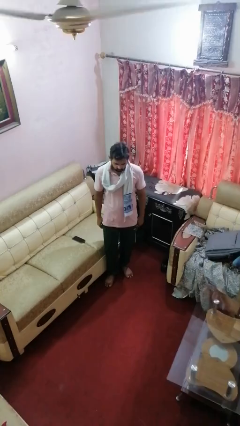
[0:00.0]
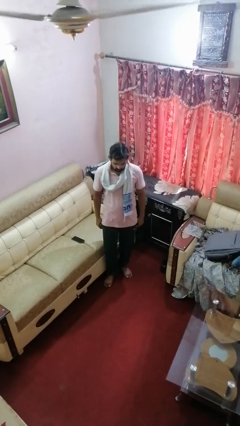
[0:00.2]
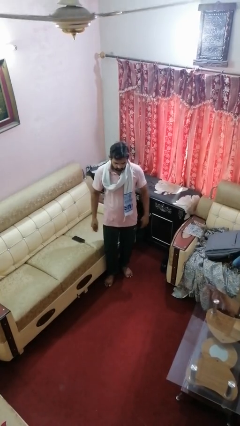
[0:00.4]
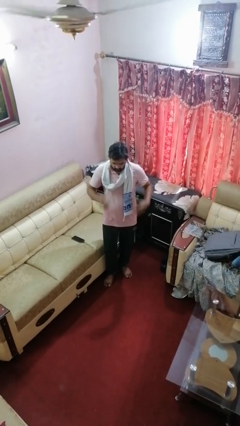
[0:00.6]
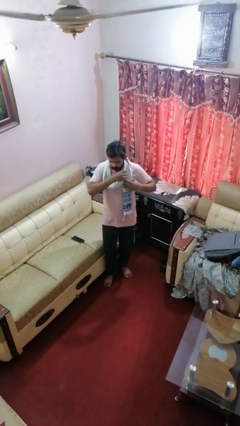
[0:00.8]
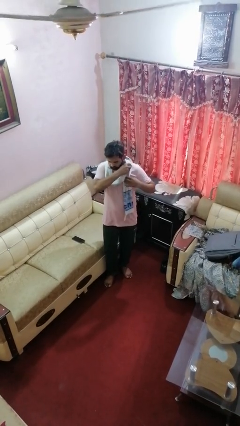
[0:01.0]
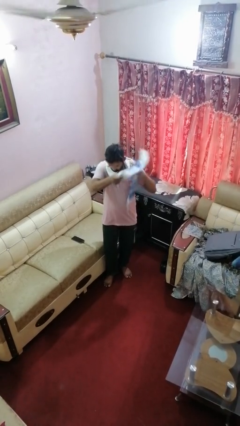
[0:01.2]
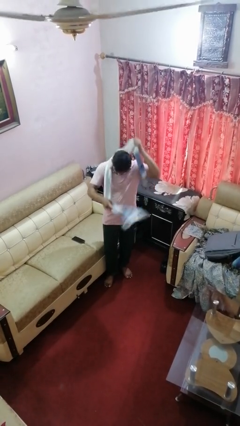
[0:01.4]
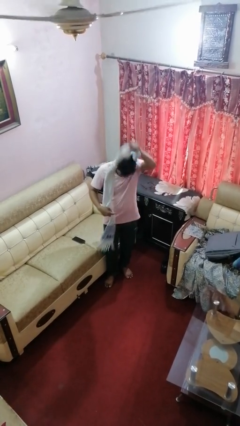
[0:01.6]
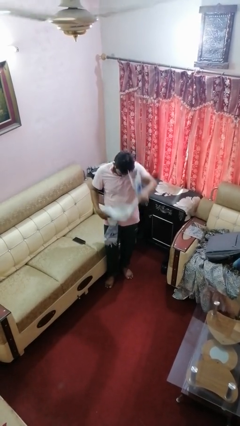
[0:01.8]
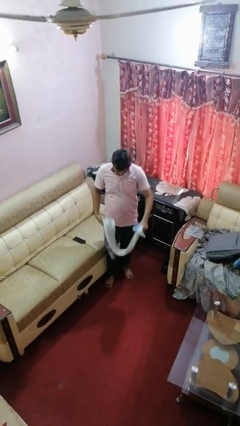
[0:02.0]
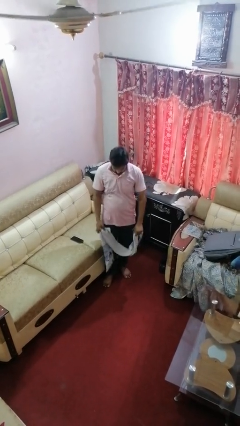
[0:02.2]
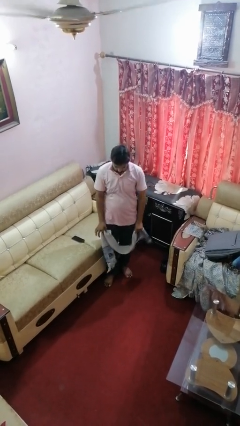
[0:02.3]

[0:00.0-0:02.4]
person takes off scarf

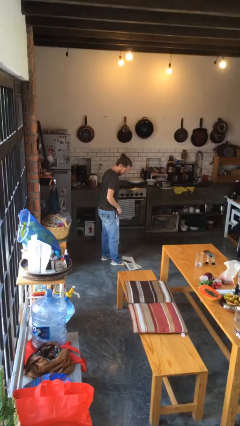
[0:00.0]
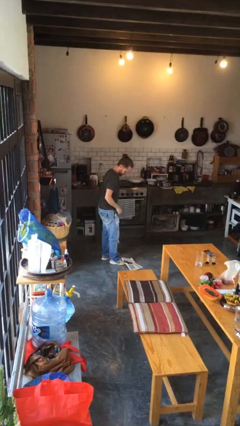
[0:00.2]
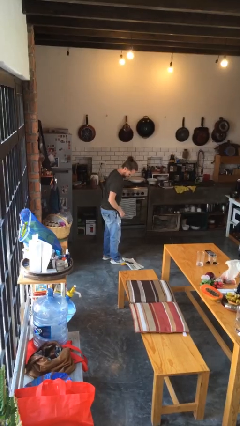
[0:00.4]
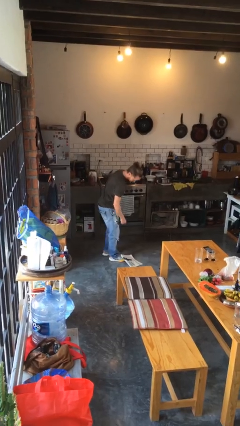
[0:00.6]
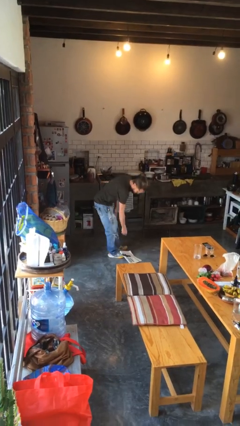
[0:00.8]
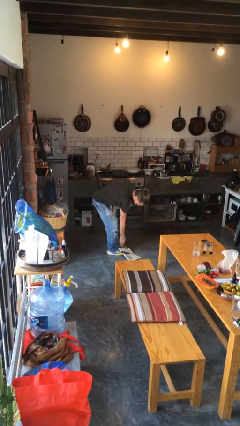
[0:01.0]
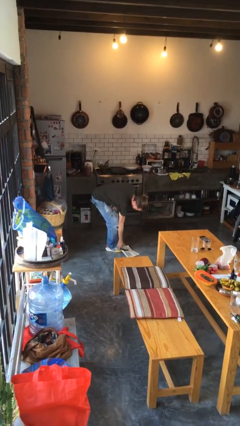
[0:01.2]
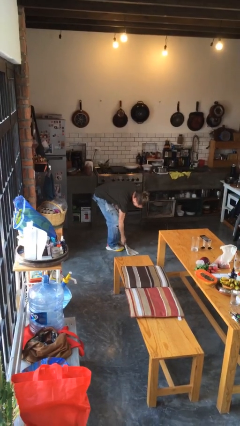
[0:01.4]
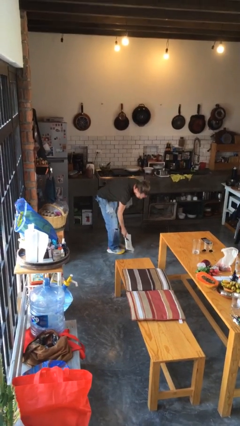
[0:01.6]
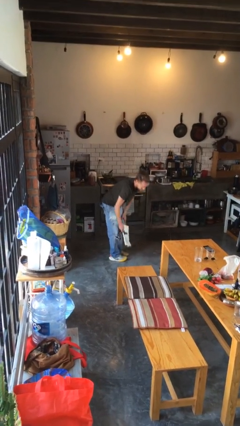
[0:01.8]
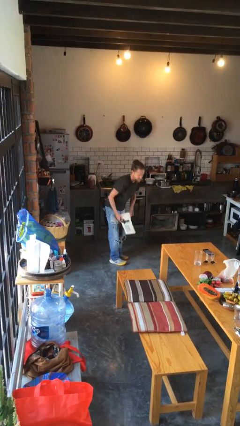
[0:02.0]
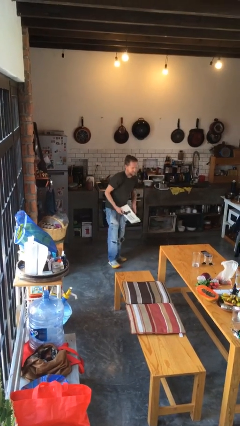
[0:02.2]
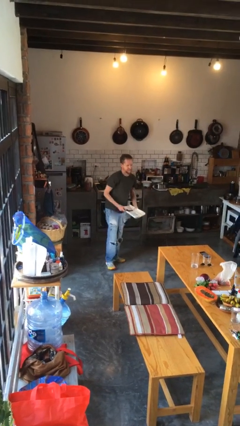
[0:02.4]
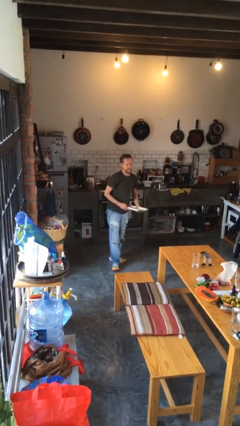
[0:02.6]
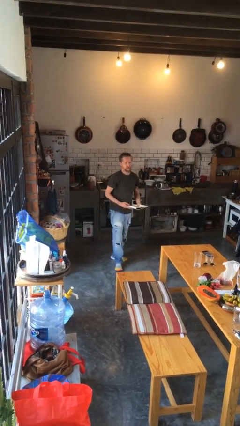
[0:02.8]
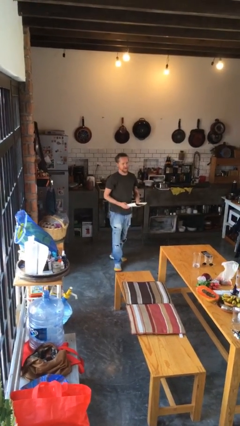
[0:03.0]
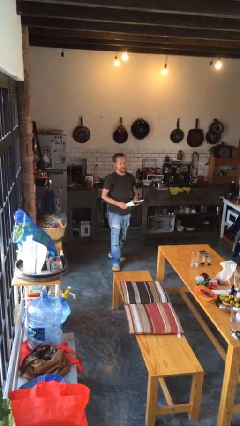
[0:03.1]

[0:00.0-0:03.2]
person picks up object from floor

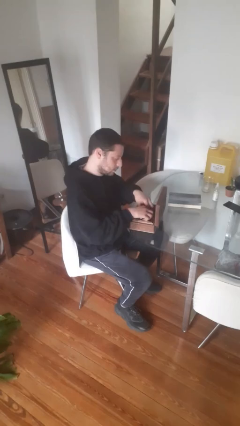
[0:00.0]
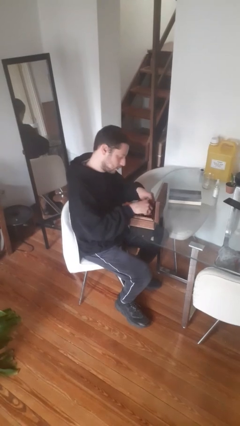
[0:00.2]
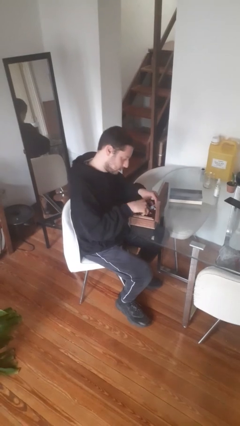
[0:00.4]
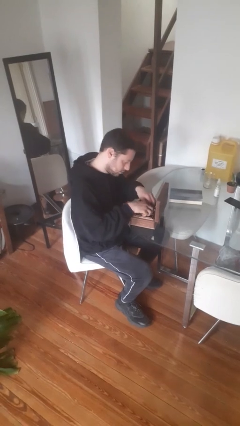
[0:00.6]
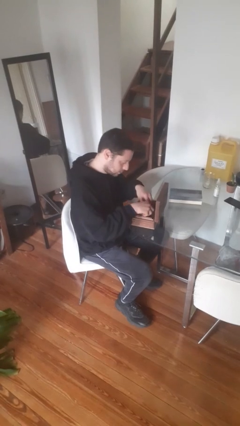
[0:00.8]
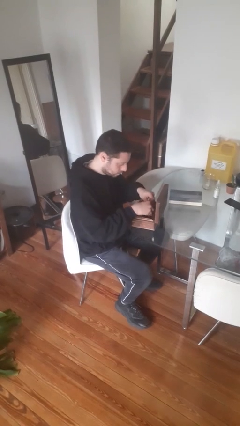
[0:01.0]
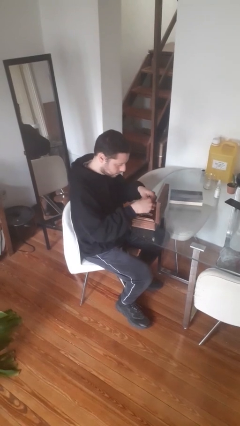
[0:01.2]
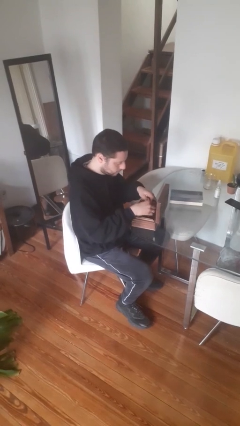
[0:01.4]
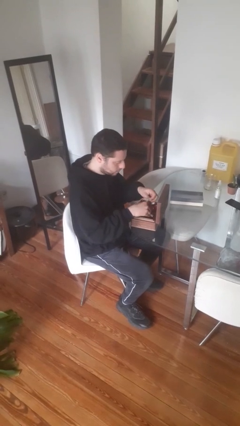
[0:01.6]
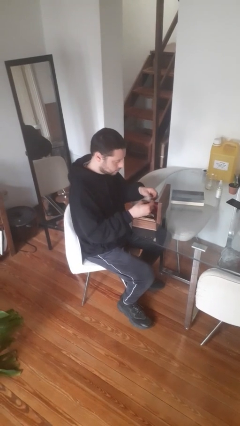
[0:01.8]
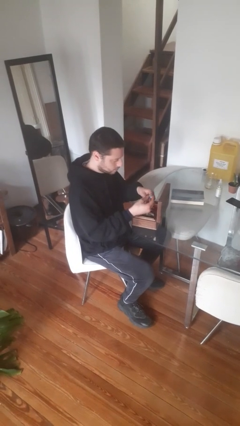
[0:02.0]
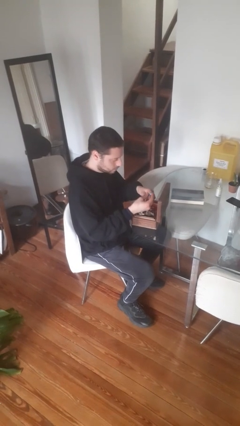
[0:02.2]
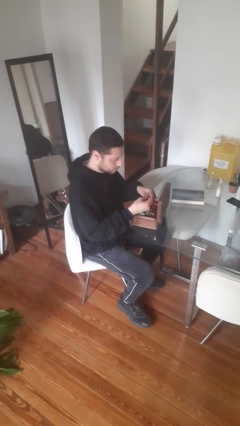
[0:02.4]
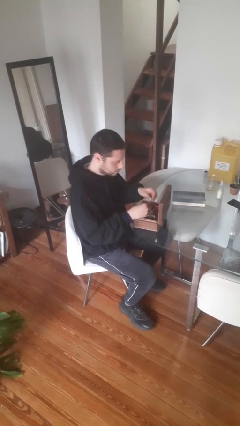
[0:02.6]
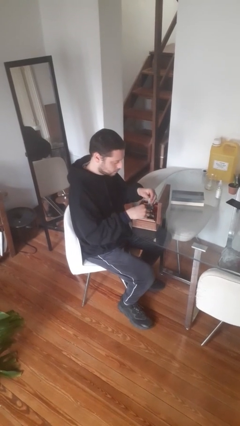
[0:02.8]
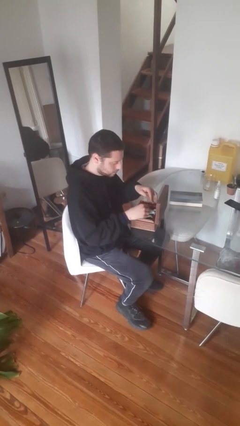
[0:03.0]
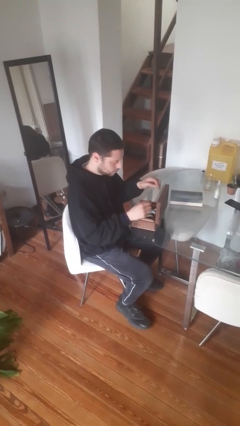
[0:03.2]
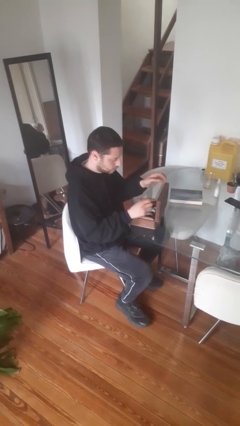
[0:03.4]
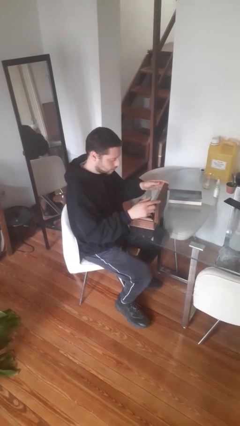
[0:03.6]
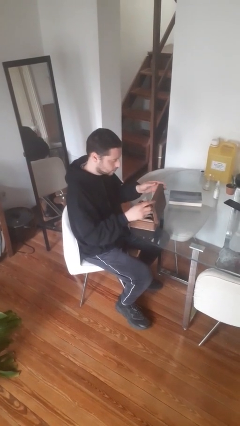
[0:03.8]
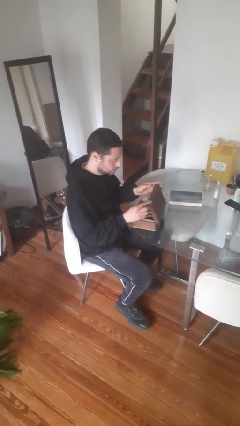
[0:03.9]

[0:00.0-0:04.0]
person searches jewelry box

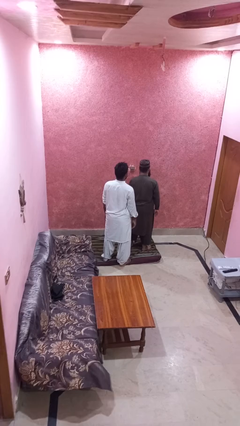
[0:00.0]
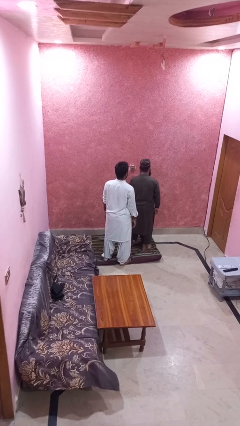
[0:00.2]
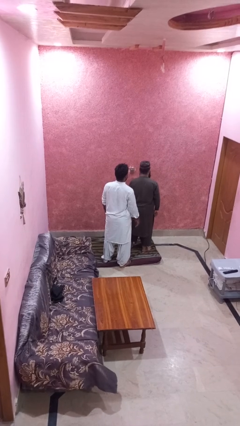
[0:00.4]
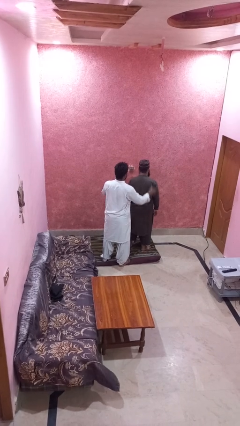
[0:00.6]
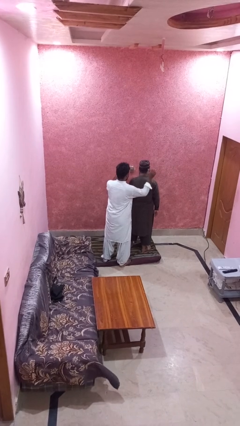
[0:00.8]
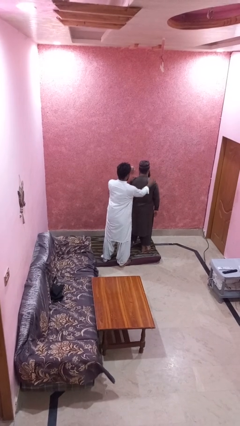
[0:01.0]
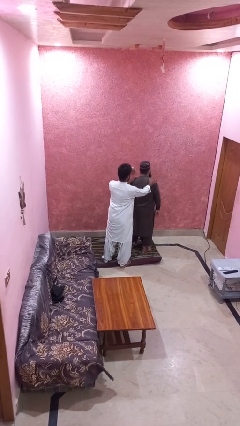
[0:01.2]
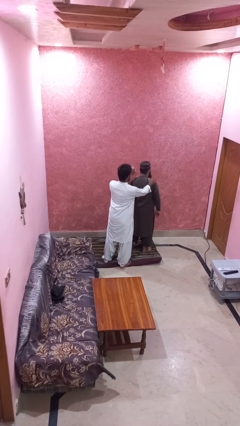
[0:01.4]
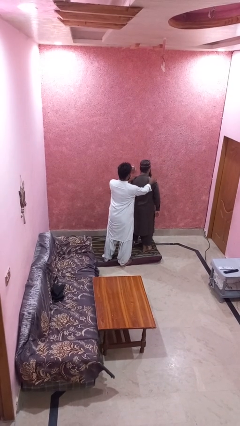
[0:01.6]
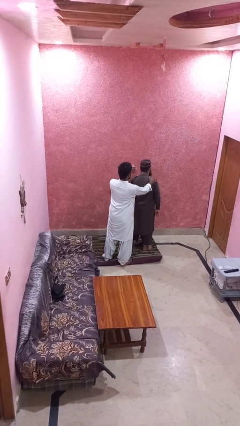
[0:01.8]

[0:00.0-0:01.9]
person grabs person by shoulder

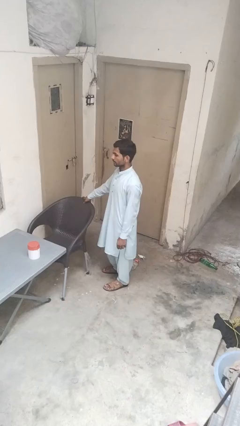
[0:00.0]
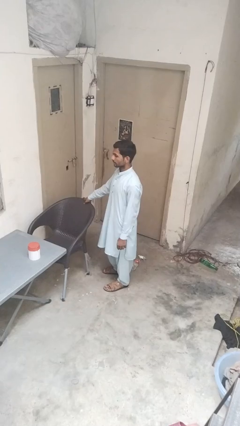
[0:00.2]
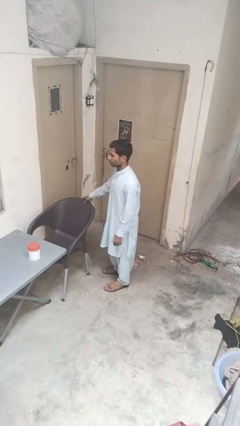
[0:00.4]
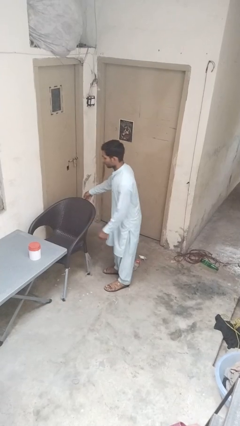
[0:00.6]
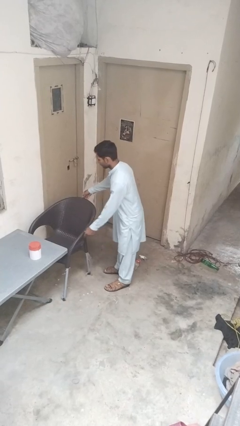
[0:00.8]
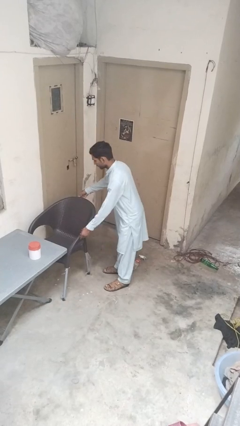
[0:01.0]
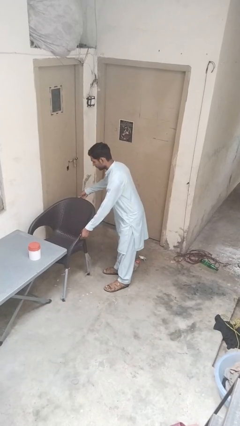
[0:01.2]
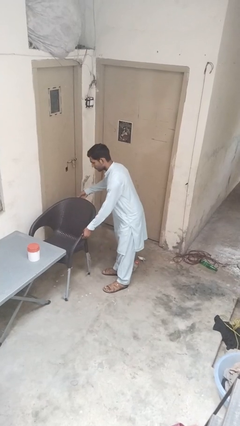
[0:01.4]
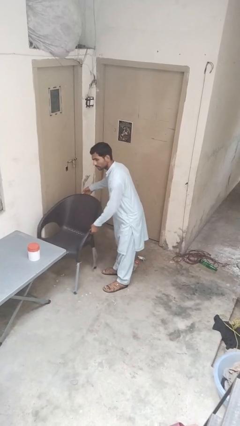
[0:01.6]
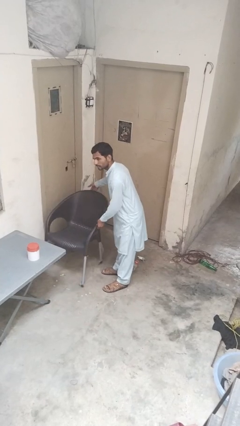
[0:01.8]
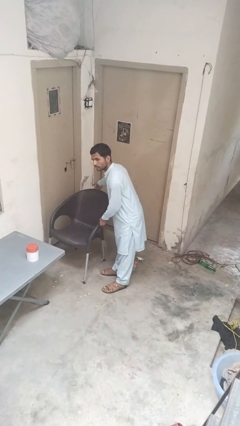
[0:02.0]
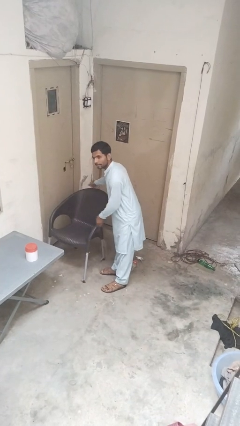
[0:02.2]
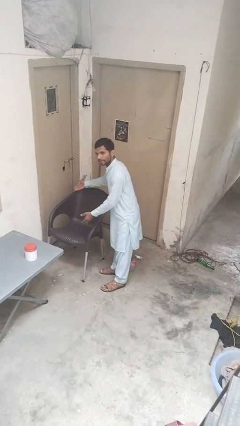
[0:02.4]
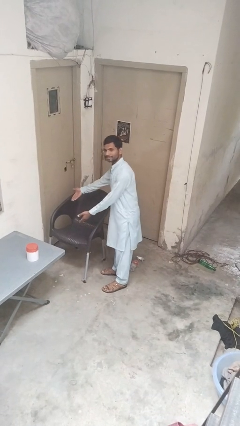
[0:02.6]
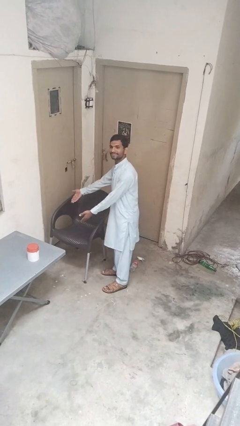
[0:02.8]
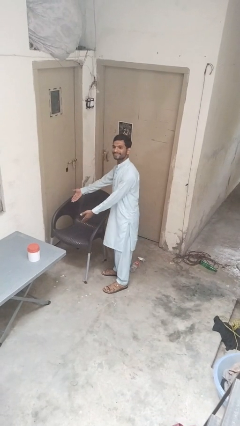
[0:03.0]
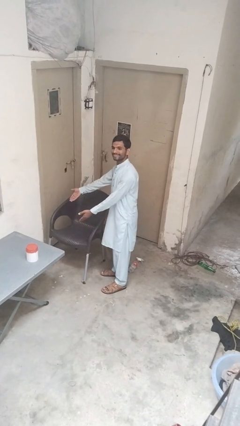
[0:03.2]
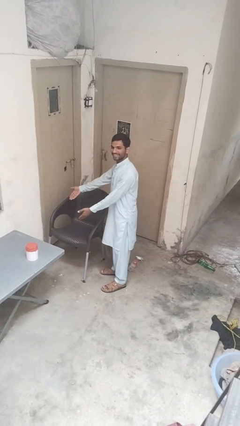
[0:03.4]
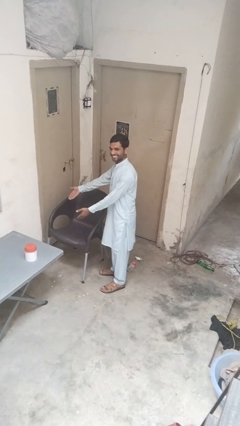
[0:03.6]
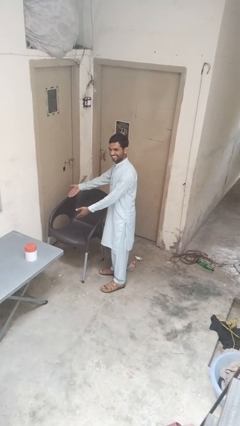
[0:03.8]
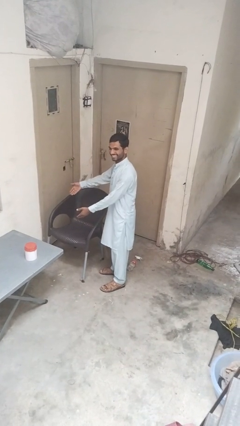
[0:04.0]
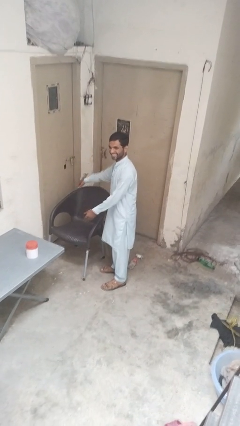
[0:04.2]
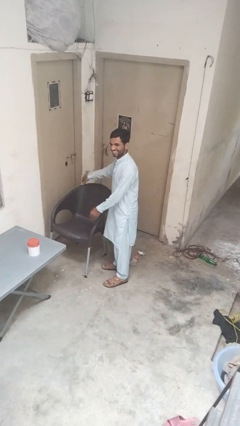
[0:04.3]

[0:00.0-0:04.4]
person pulls out chair

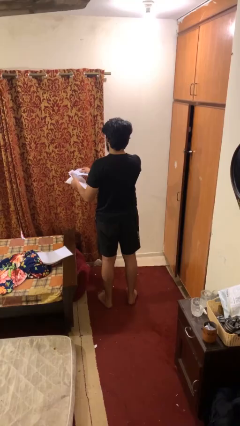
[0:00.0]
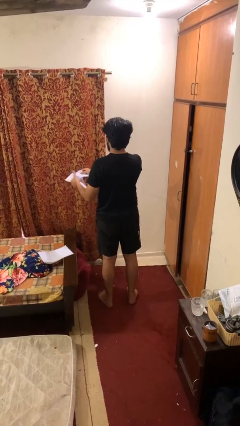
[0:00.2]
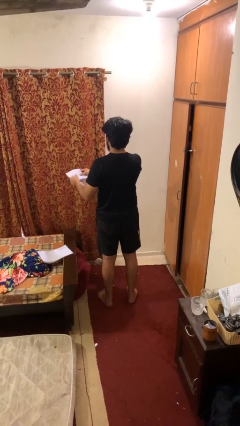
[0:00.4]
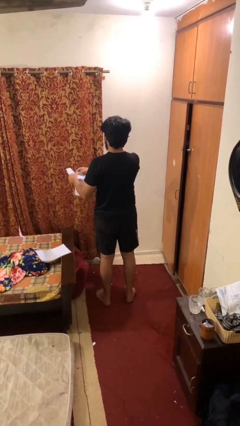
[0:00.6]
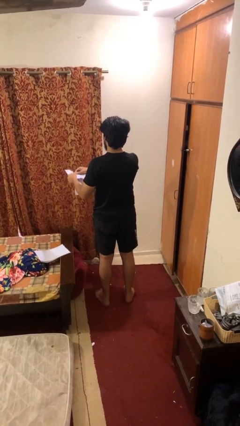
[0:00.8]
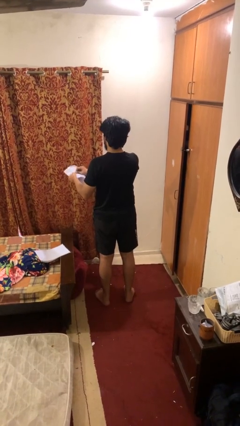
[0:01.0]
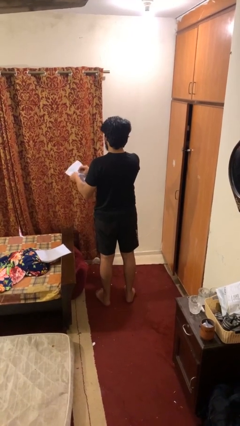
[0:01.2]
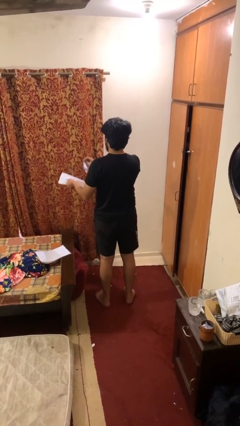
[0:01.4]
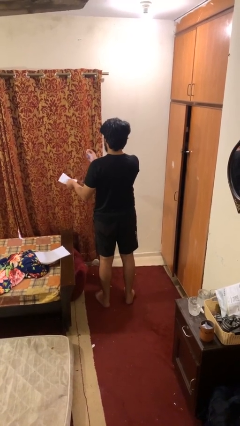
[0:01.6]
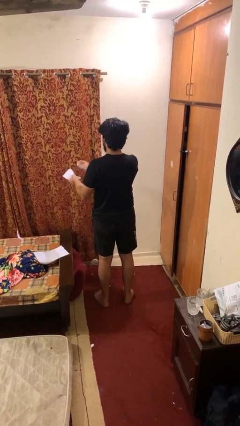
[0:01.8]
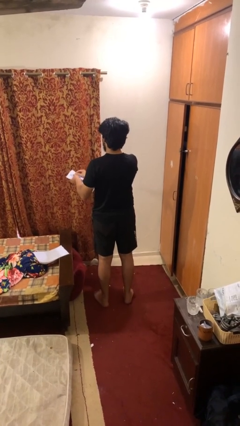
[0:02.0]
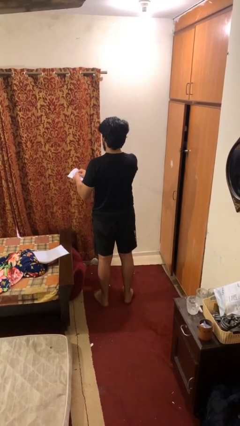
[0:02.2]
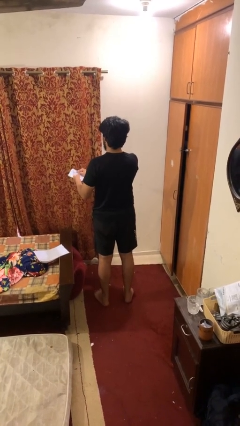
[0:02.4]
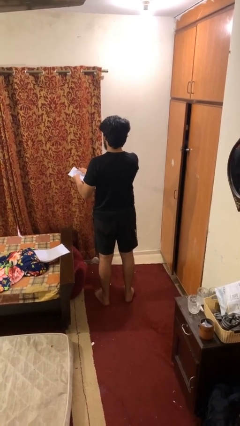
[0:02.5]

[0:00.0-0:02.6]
person tears paper
